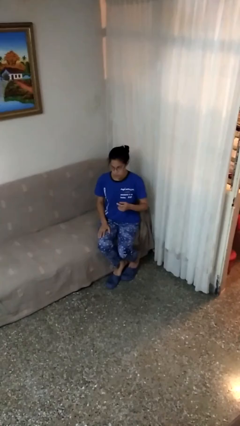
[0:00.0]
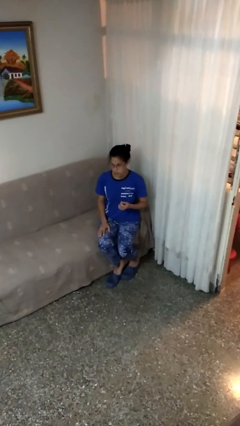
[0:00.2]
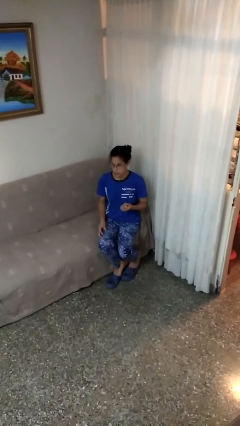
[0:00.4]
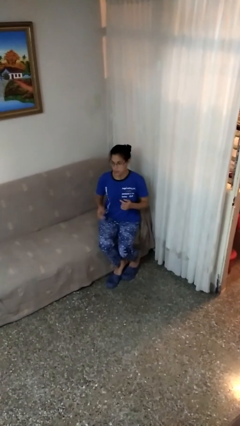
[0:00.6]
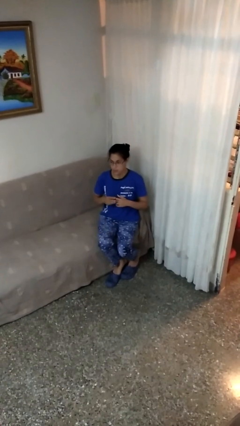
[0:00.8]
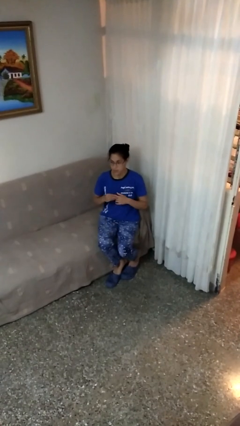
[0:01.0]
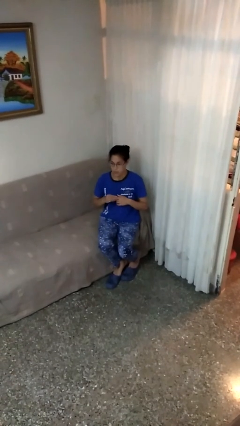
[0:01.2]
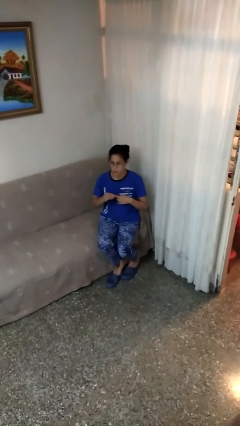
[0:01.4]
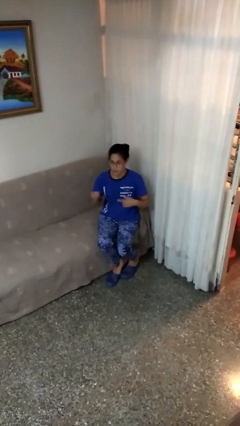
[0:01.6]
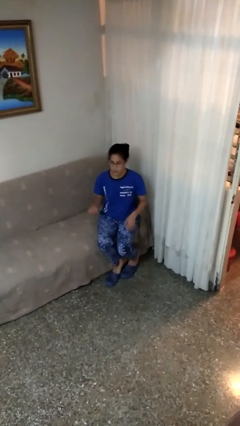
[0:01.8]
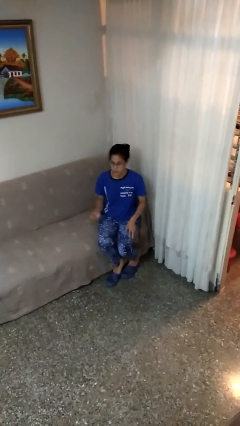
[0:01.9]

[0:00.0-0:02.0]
person takes off ring

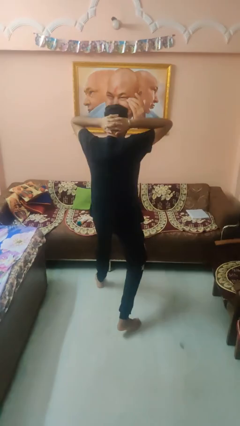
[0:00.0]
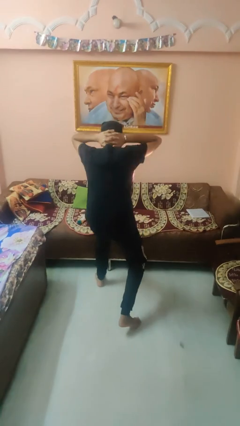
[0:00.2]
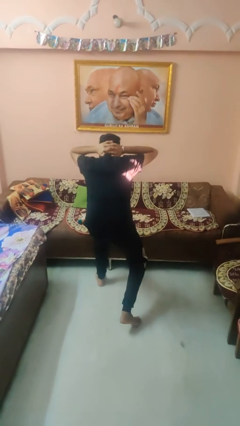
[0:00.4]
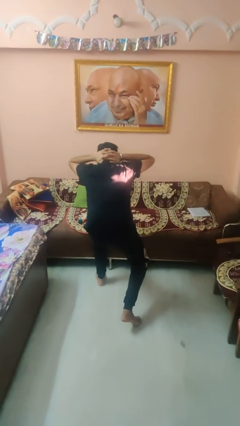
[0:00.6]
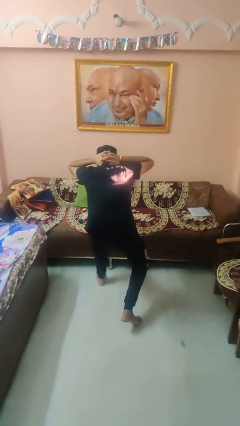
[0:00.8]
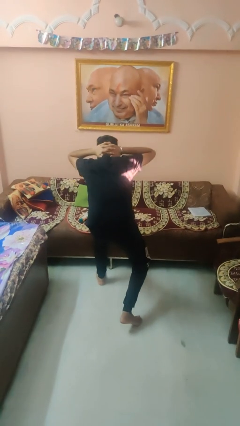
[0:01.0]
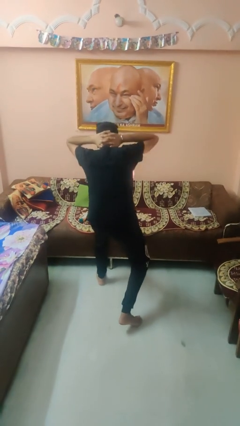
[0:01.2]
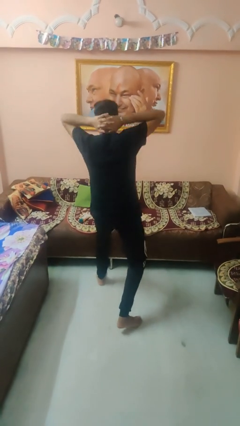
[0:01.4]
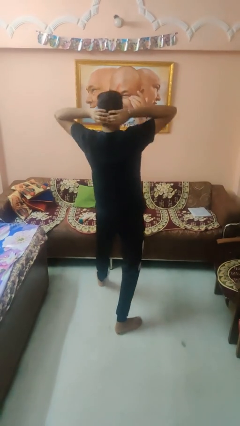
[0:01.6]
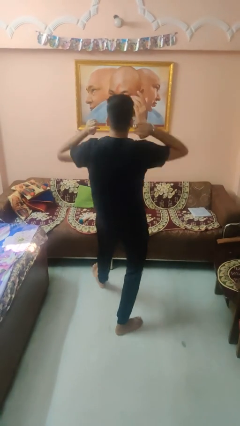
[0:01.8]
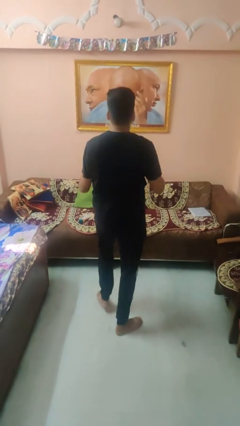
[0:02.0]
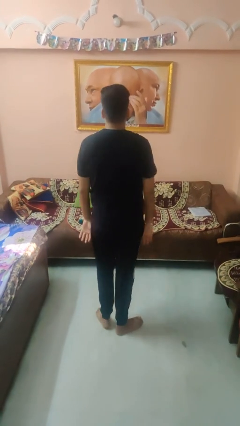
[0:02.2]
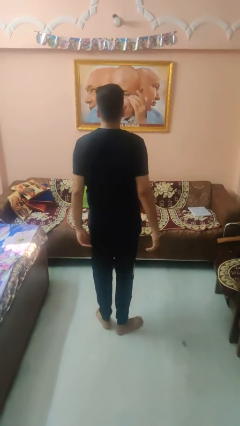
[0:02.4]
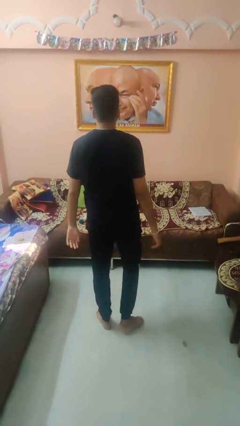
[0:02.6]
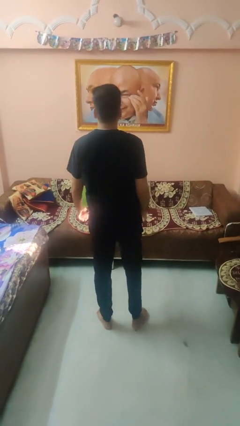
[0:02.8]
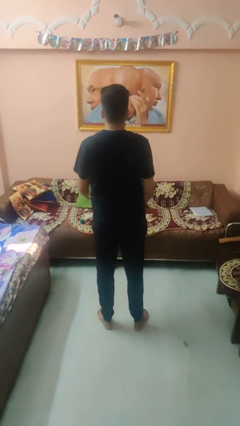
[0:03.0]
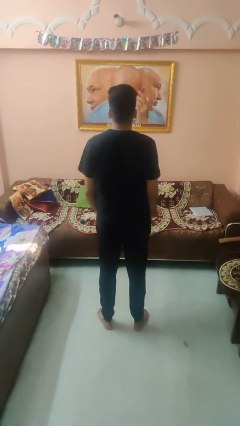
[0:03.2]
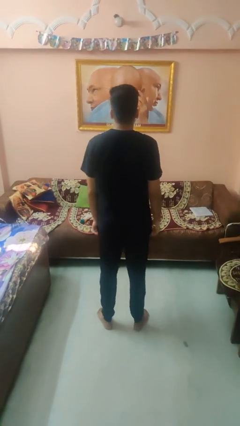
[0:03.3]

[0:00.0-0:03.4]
person exercises with lunges

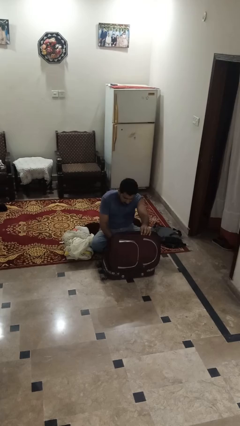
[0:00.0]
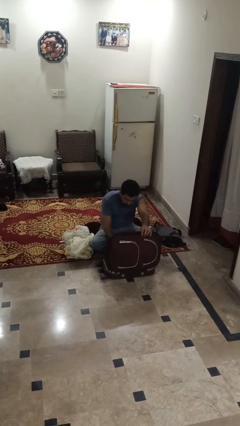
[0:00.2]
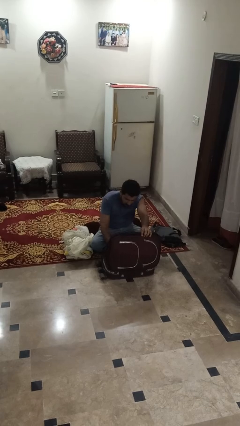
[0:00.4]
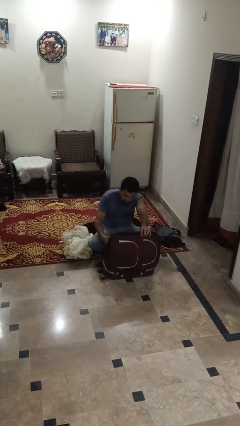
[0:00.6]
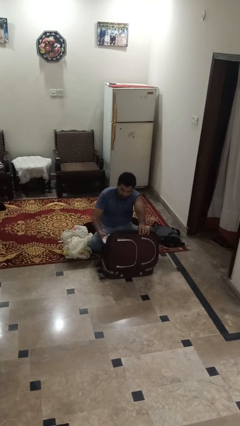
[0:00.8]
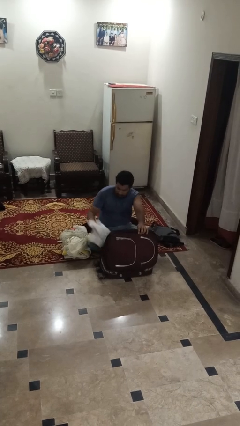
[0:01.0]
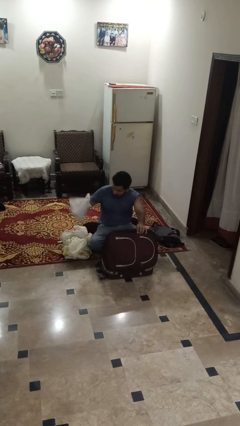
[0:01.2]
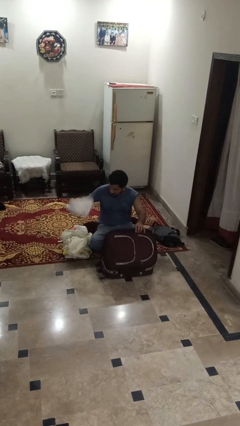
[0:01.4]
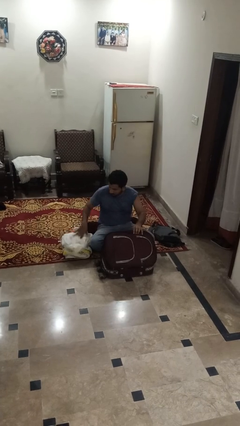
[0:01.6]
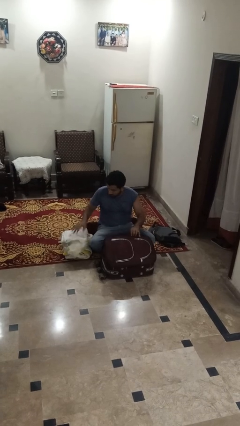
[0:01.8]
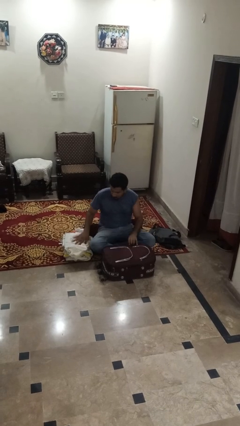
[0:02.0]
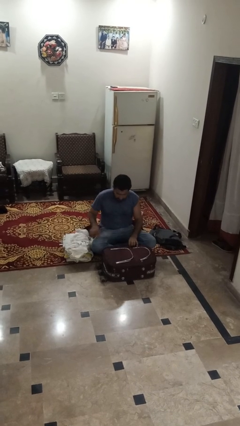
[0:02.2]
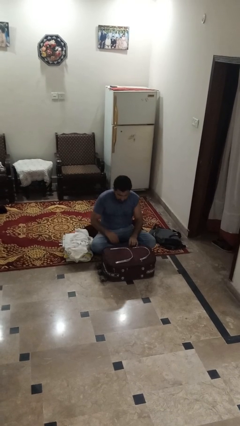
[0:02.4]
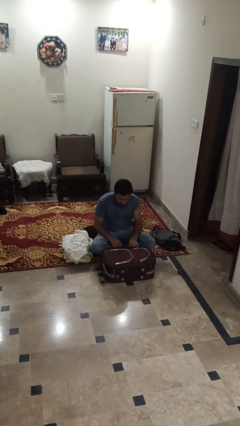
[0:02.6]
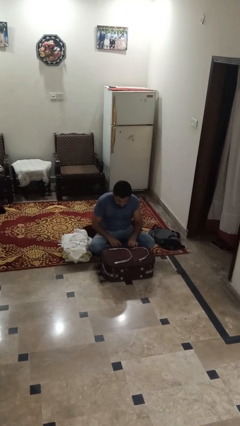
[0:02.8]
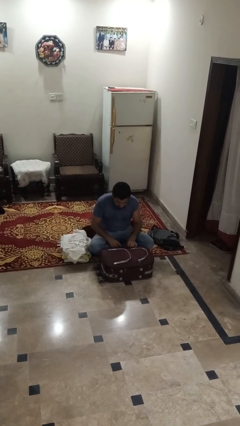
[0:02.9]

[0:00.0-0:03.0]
person unloads clothes from suitcase

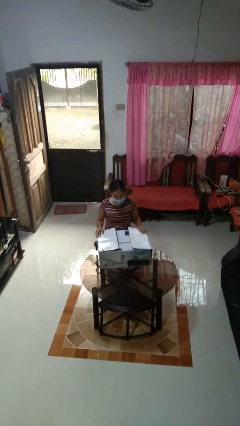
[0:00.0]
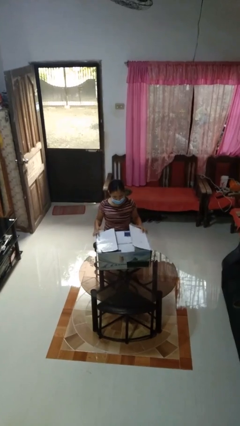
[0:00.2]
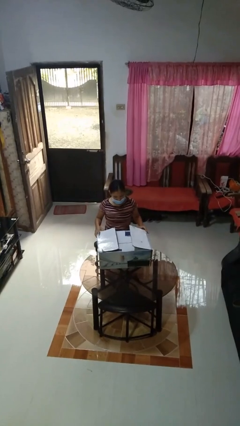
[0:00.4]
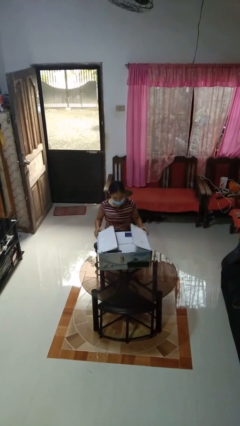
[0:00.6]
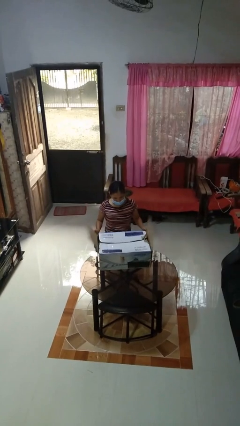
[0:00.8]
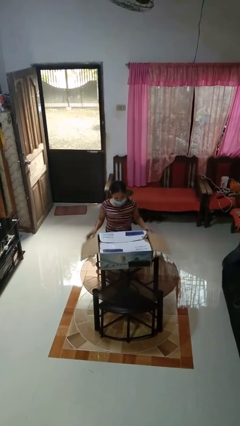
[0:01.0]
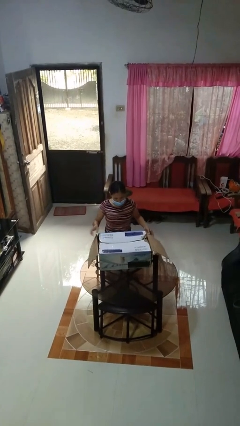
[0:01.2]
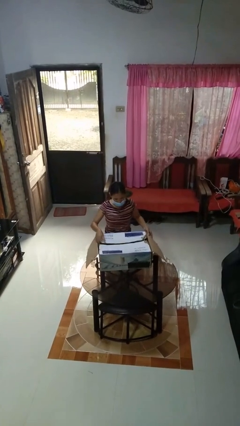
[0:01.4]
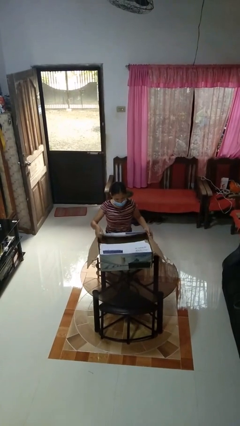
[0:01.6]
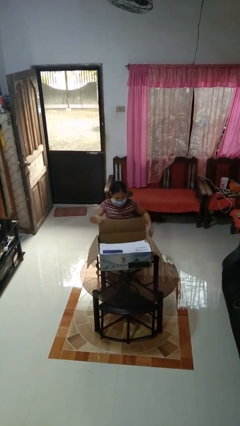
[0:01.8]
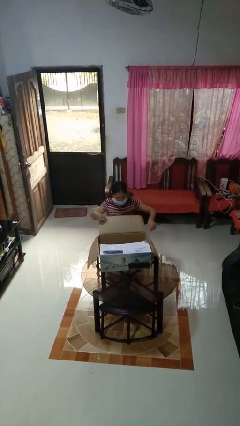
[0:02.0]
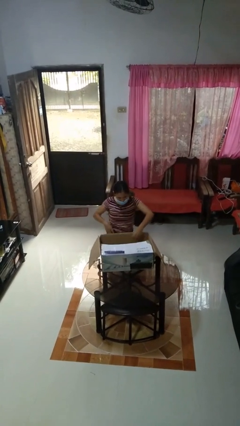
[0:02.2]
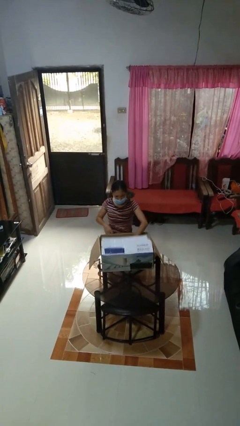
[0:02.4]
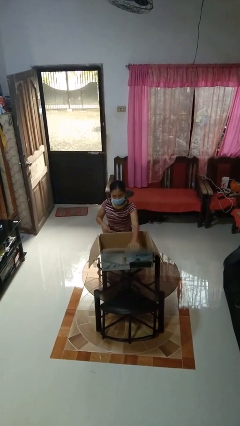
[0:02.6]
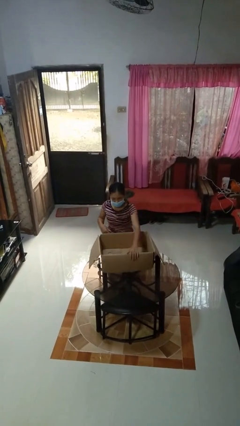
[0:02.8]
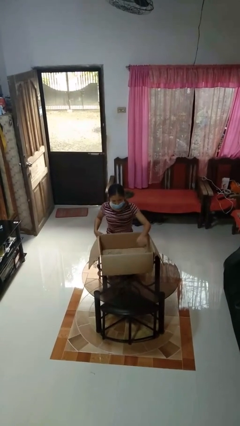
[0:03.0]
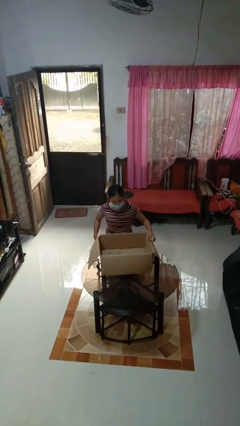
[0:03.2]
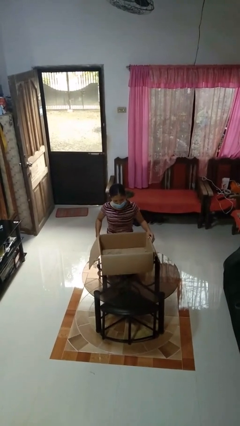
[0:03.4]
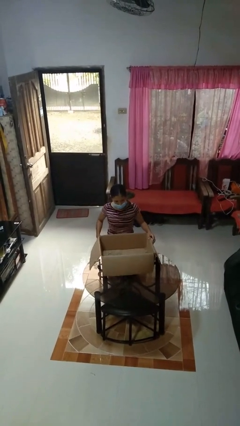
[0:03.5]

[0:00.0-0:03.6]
person opens box

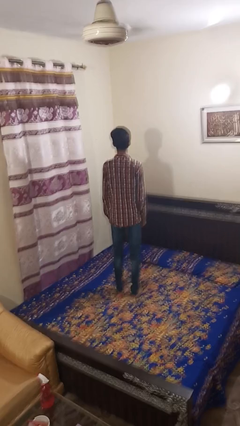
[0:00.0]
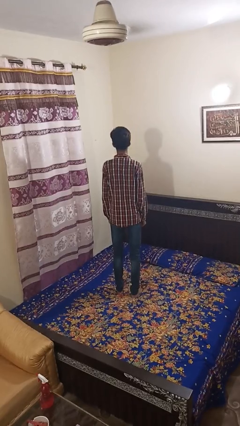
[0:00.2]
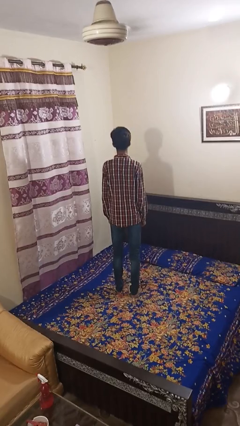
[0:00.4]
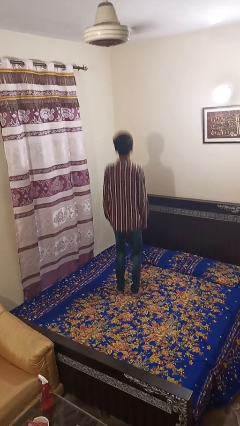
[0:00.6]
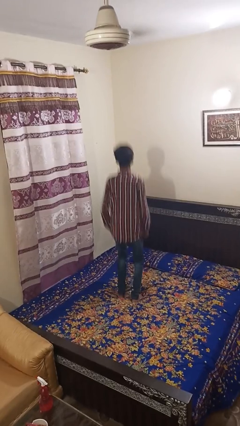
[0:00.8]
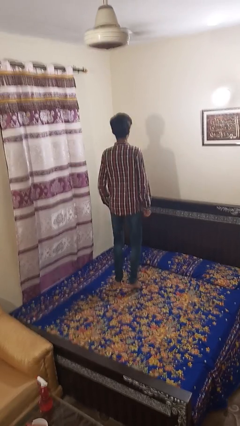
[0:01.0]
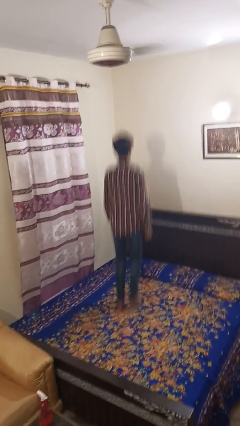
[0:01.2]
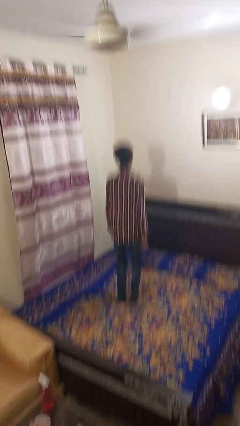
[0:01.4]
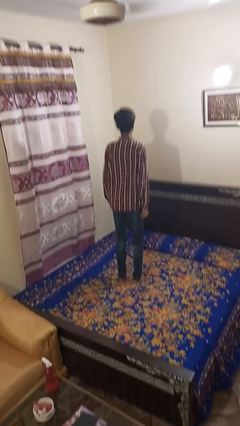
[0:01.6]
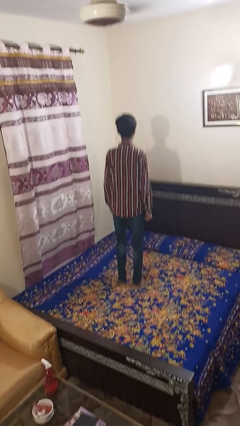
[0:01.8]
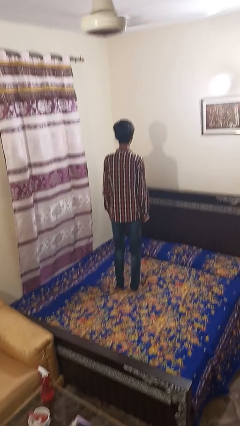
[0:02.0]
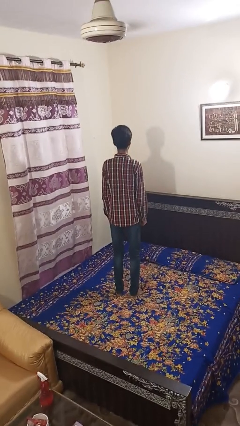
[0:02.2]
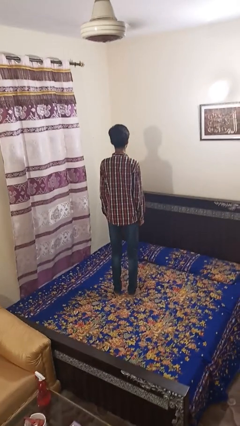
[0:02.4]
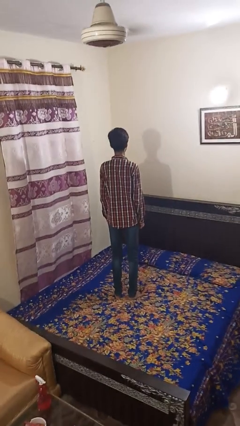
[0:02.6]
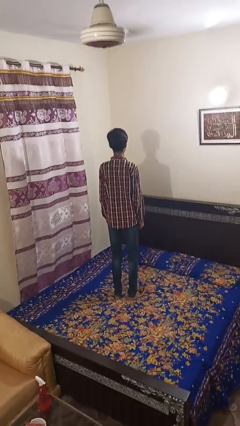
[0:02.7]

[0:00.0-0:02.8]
person jumps on bed

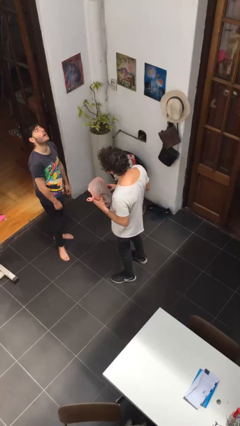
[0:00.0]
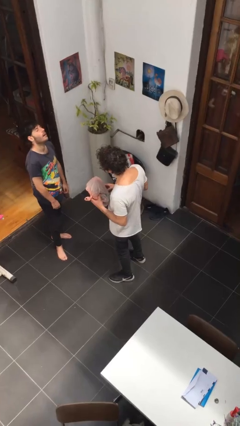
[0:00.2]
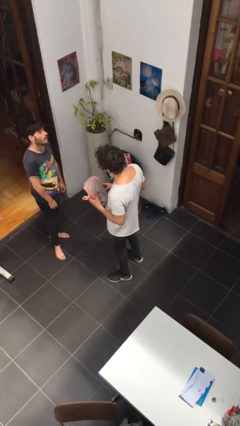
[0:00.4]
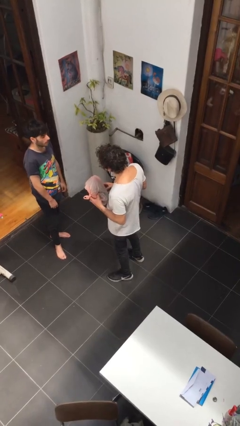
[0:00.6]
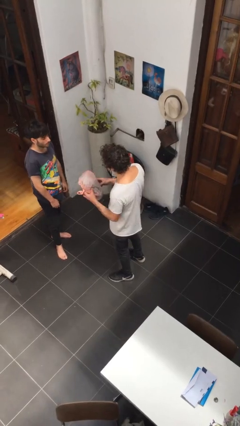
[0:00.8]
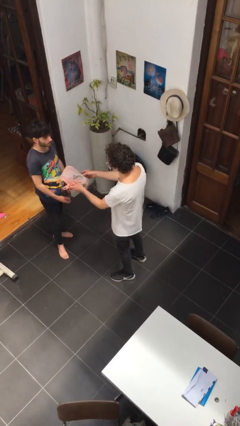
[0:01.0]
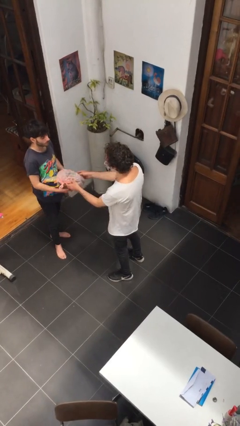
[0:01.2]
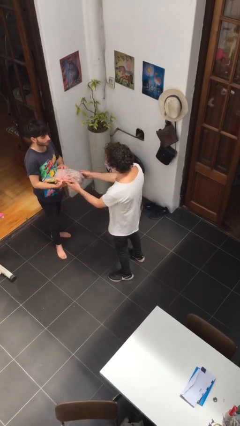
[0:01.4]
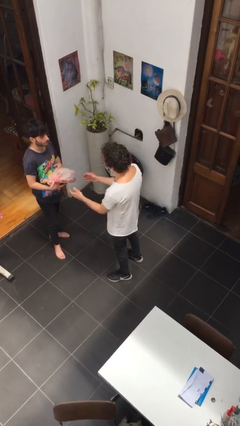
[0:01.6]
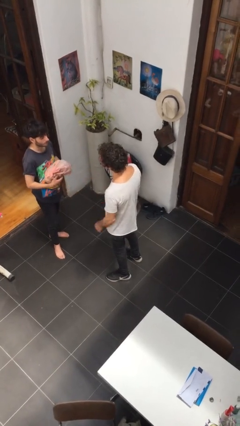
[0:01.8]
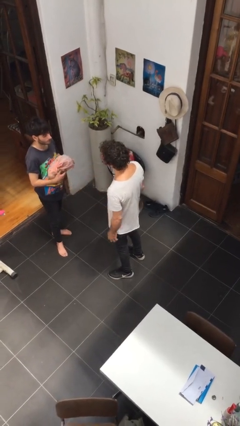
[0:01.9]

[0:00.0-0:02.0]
person transfers object to person

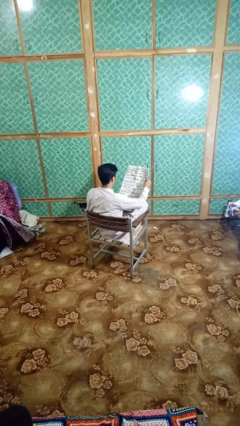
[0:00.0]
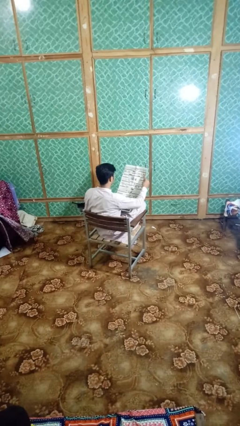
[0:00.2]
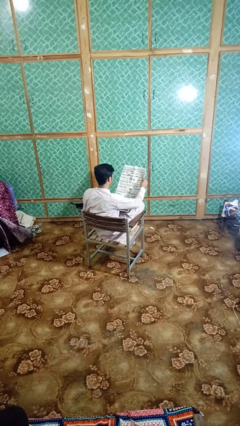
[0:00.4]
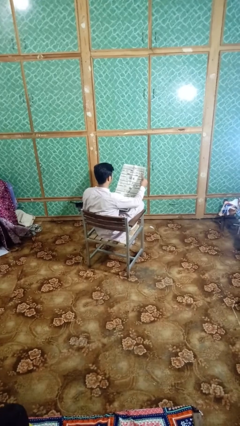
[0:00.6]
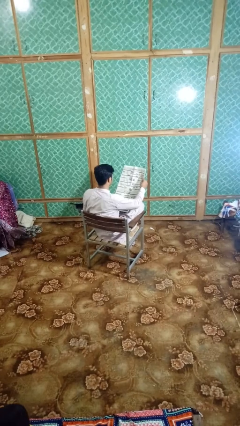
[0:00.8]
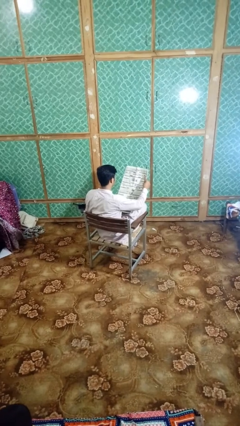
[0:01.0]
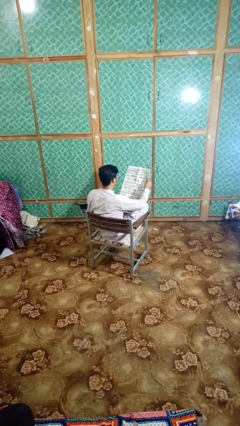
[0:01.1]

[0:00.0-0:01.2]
person reads newspaper
